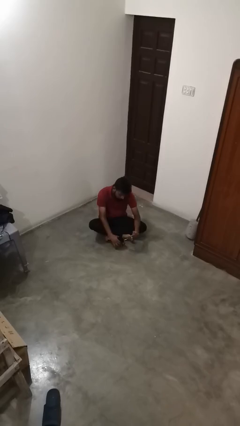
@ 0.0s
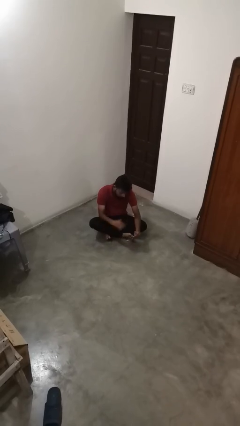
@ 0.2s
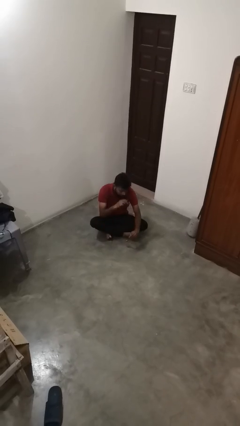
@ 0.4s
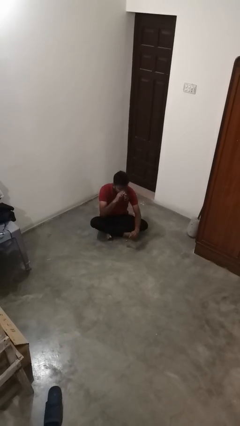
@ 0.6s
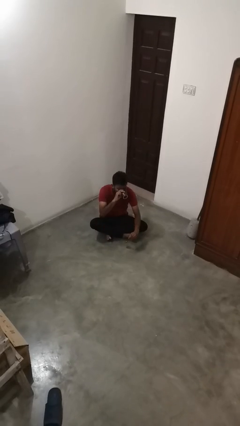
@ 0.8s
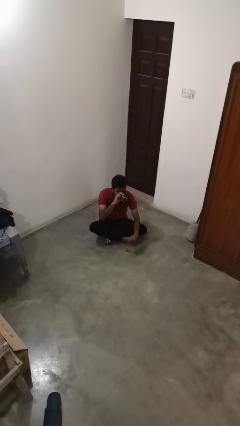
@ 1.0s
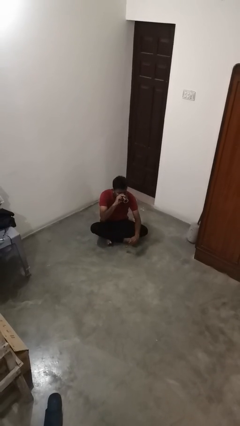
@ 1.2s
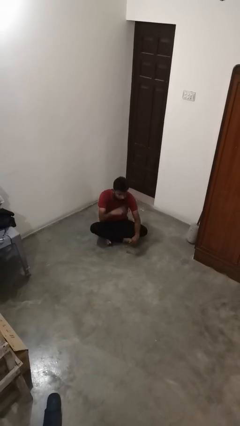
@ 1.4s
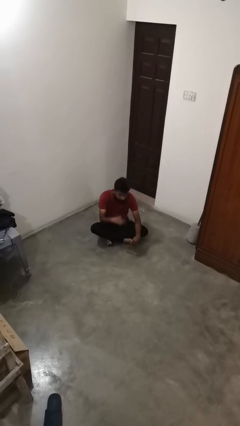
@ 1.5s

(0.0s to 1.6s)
person drinks from mug

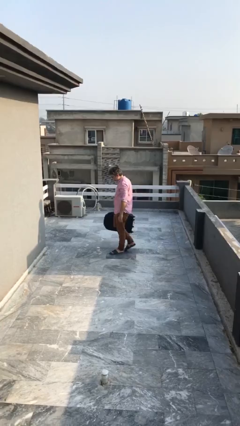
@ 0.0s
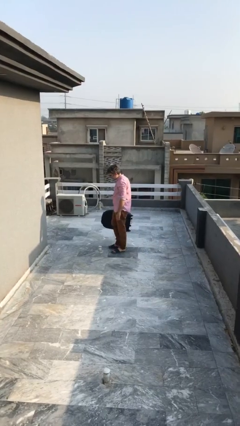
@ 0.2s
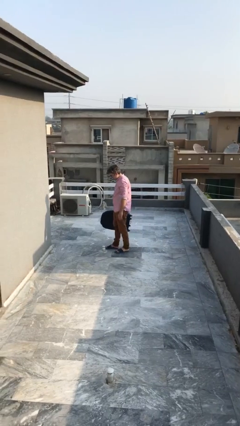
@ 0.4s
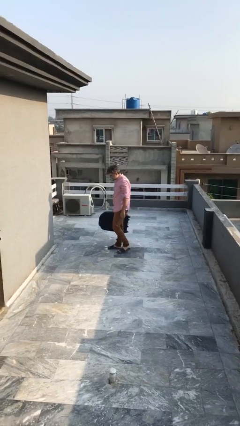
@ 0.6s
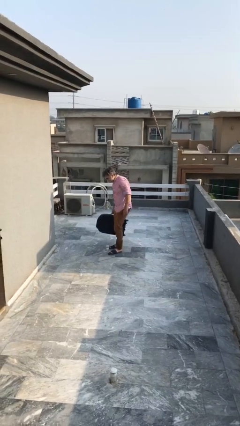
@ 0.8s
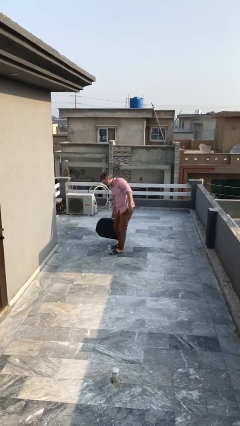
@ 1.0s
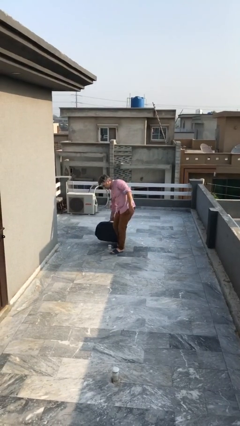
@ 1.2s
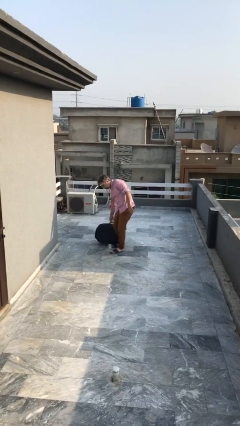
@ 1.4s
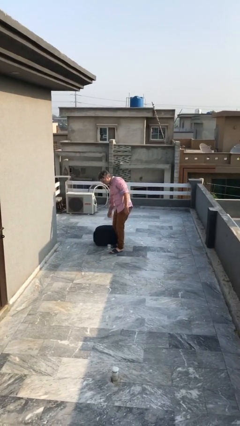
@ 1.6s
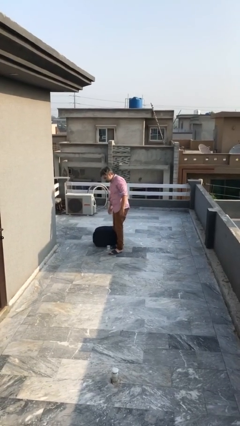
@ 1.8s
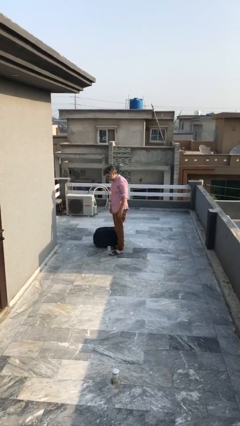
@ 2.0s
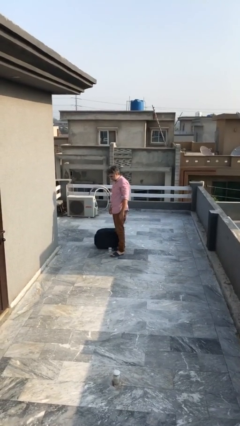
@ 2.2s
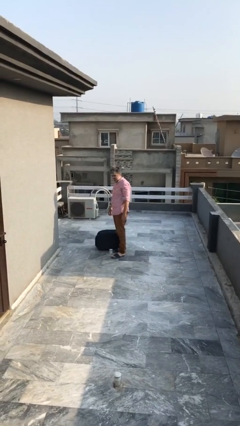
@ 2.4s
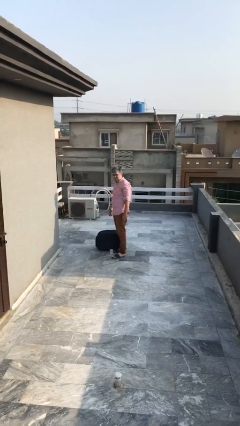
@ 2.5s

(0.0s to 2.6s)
person puts down object on floor

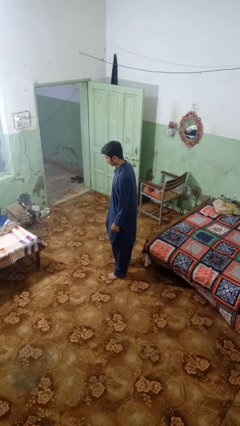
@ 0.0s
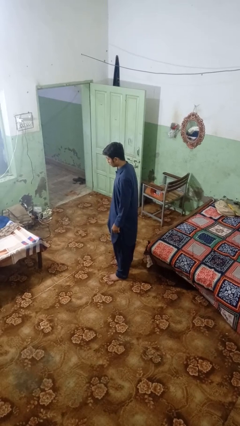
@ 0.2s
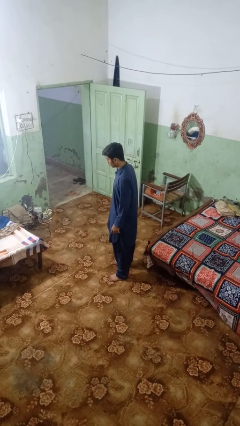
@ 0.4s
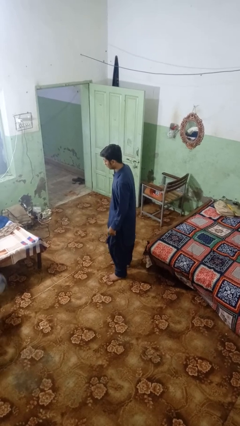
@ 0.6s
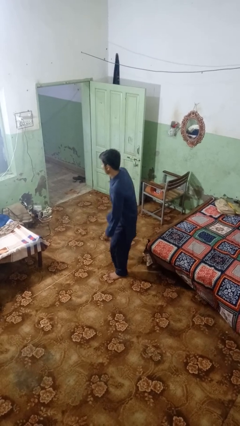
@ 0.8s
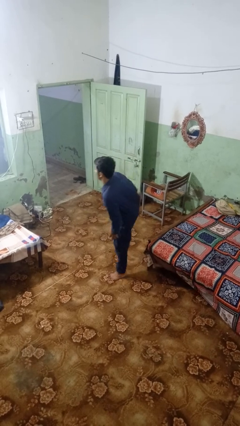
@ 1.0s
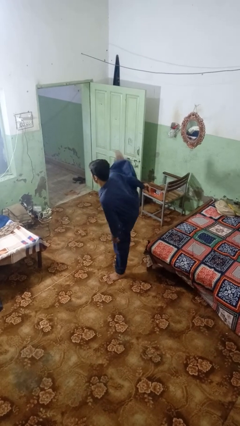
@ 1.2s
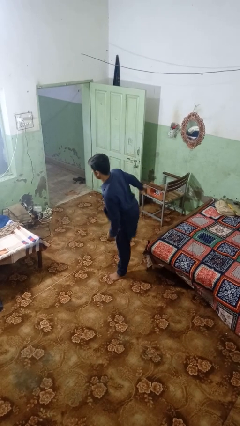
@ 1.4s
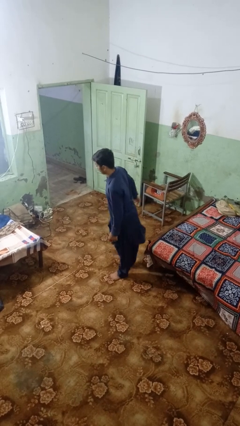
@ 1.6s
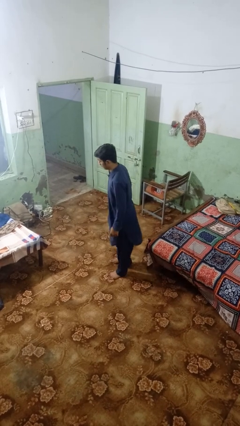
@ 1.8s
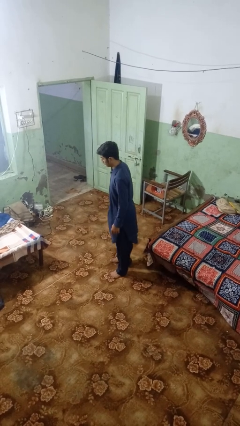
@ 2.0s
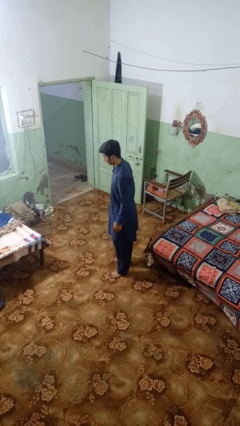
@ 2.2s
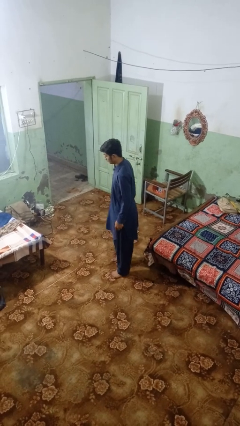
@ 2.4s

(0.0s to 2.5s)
person karate kicks

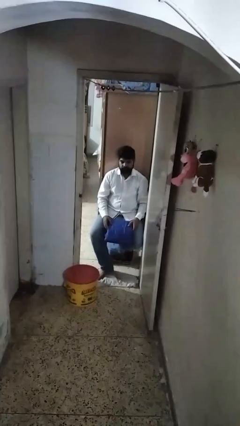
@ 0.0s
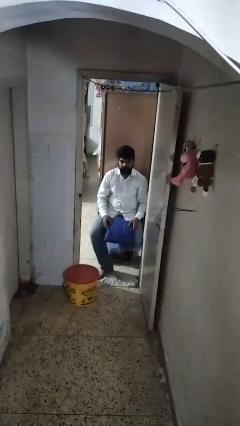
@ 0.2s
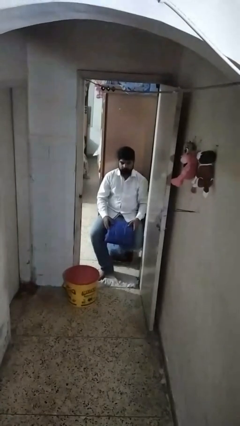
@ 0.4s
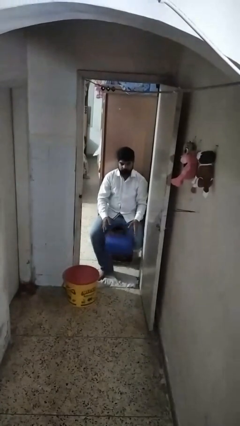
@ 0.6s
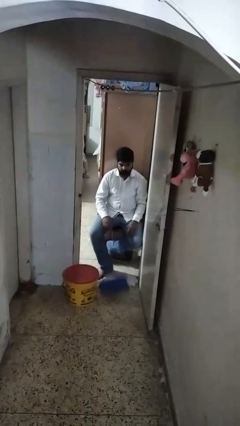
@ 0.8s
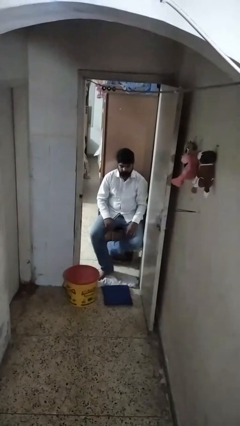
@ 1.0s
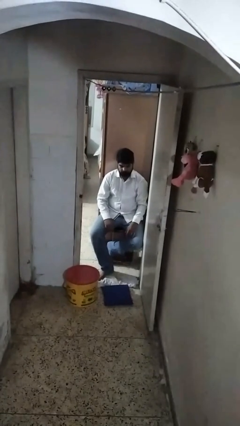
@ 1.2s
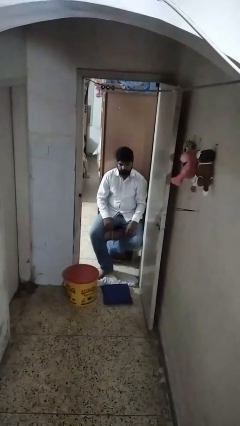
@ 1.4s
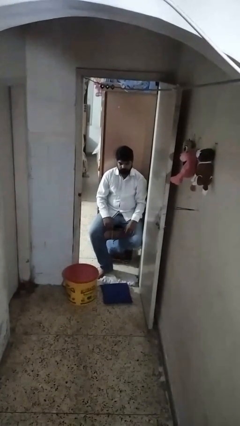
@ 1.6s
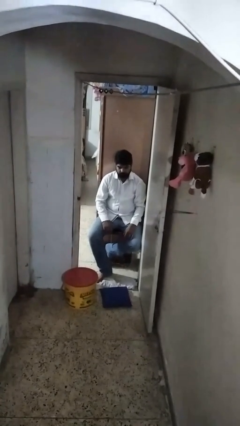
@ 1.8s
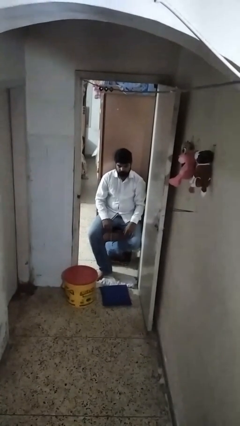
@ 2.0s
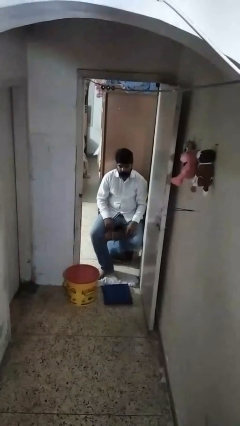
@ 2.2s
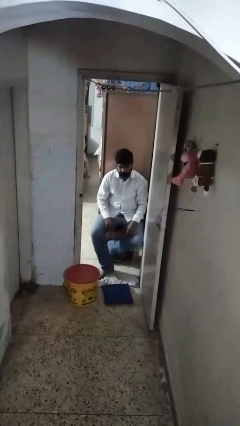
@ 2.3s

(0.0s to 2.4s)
person drops object

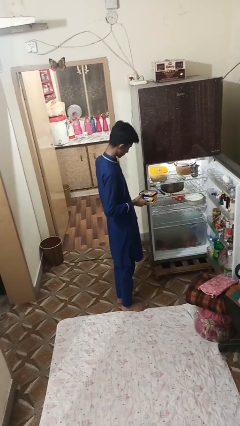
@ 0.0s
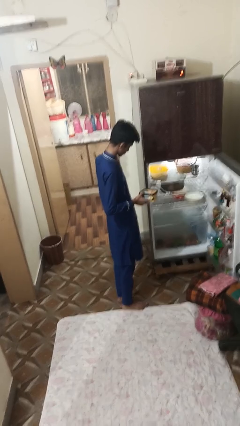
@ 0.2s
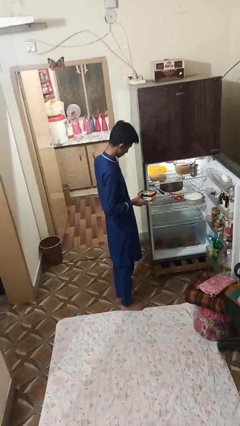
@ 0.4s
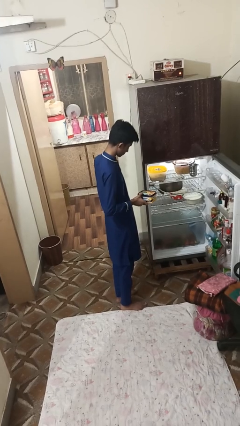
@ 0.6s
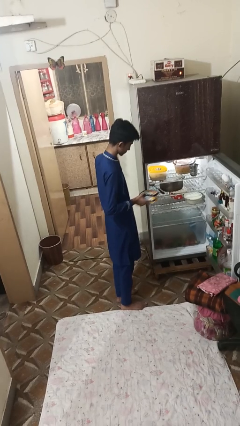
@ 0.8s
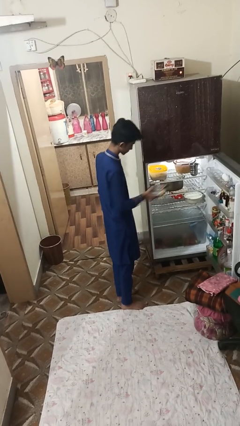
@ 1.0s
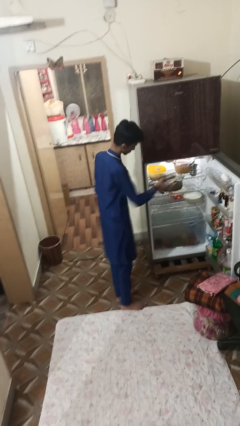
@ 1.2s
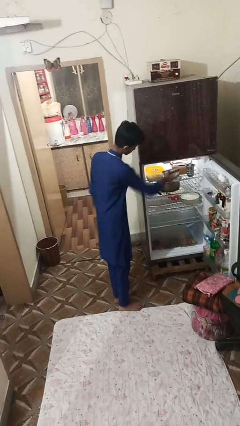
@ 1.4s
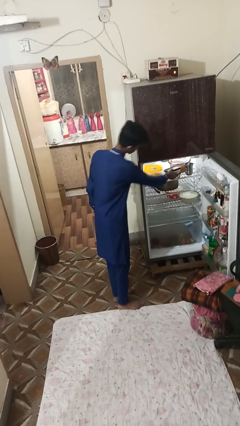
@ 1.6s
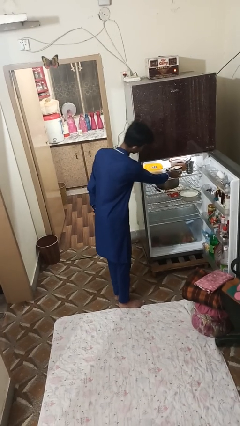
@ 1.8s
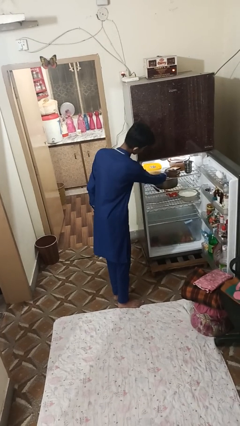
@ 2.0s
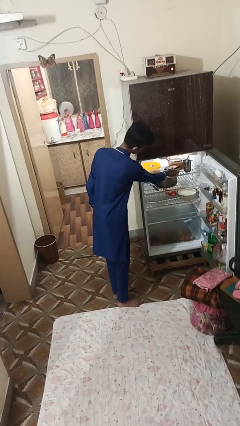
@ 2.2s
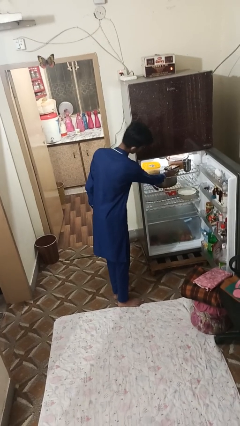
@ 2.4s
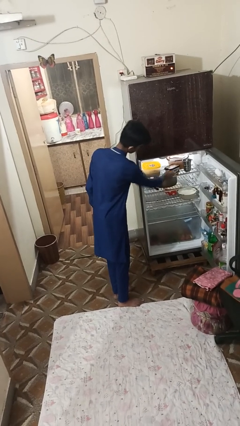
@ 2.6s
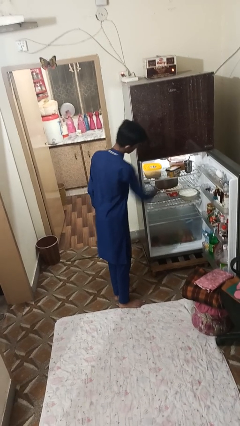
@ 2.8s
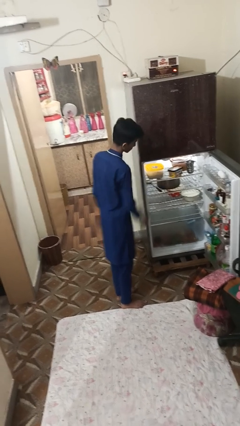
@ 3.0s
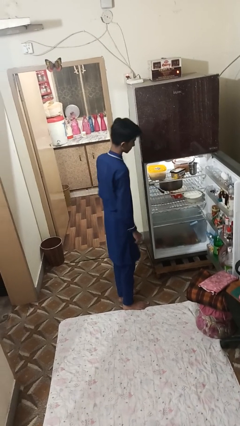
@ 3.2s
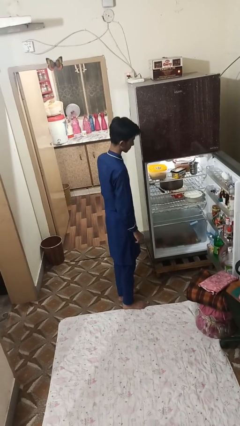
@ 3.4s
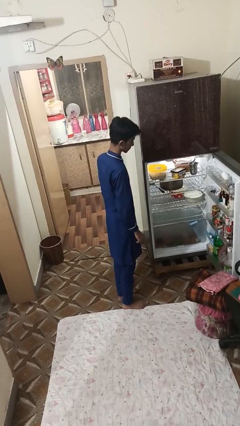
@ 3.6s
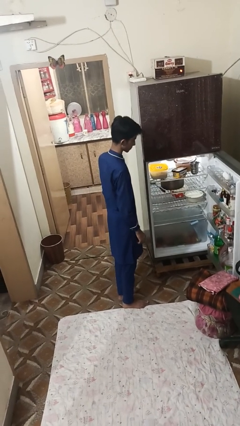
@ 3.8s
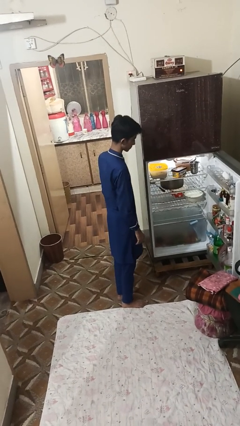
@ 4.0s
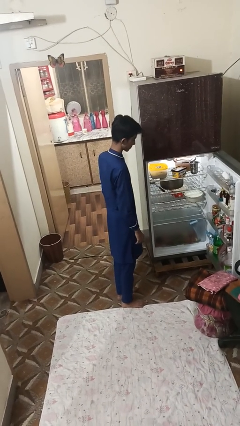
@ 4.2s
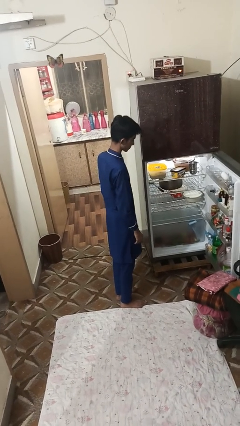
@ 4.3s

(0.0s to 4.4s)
person puts object into refrigerator

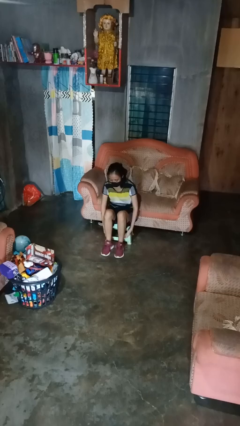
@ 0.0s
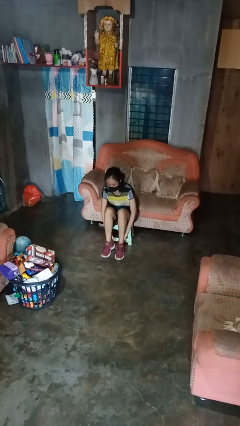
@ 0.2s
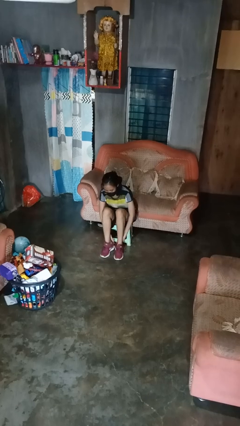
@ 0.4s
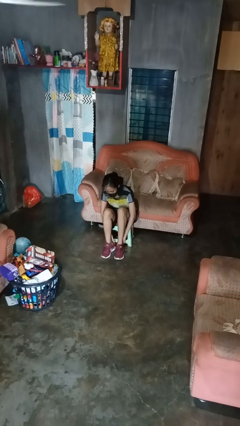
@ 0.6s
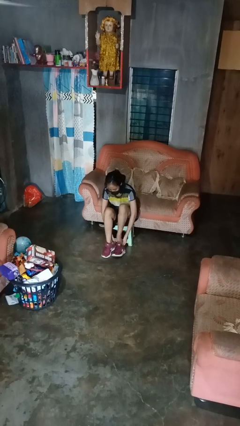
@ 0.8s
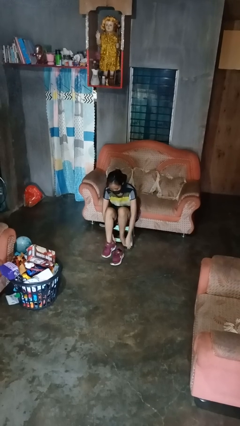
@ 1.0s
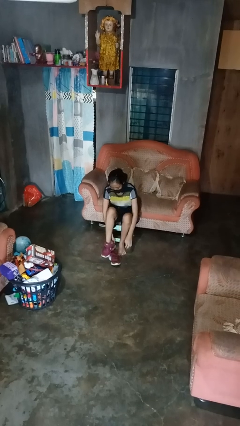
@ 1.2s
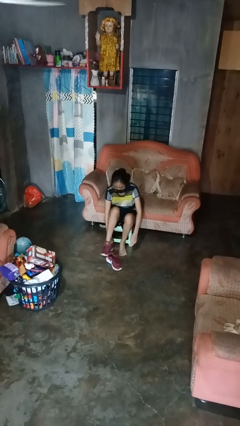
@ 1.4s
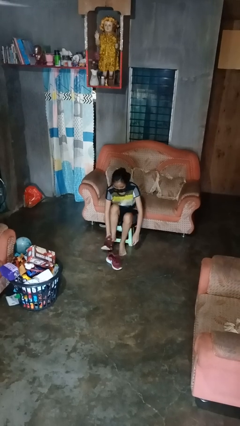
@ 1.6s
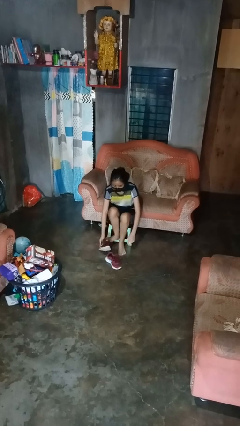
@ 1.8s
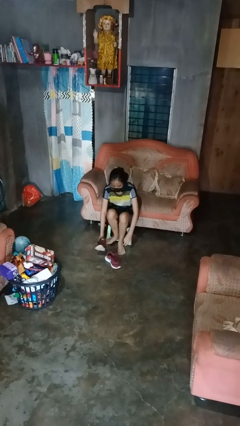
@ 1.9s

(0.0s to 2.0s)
person takes off shoes

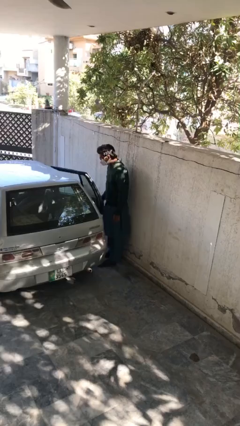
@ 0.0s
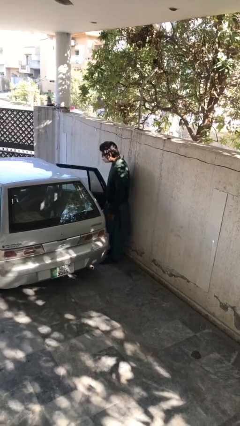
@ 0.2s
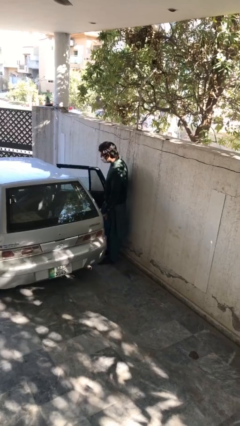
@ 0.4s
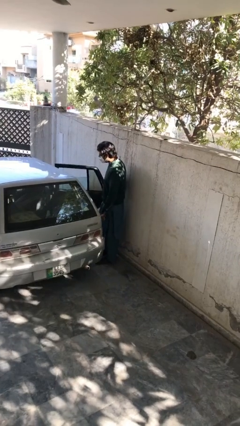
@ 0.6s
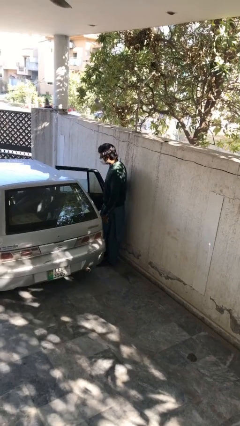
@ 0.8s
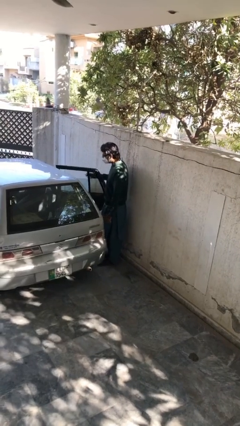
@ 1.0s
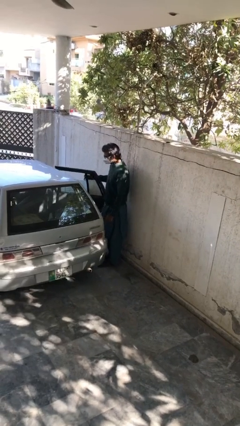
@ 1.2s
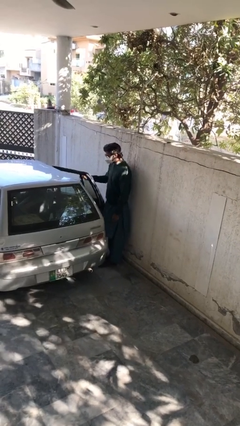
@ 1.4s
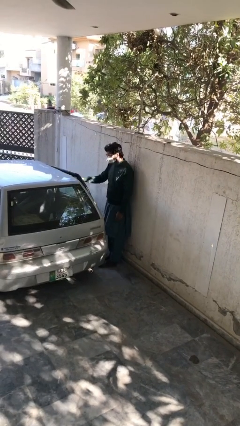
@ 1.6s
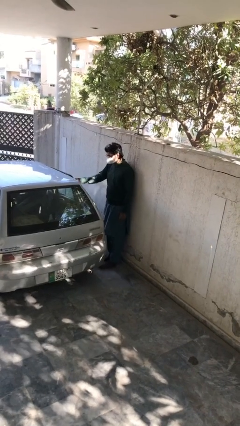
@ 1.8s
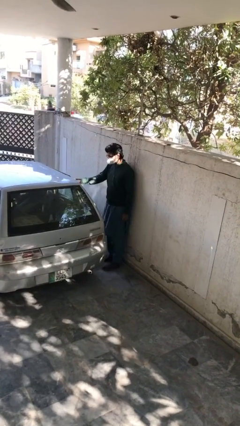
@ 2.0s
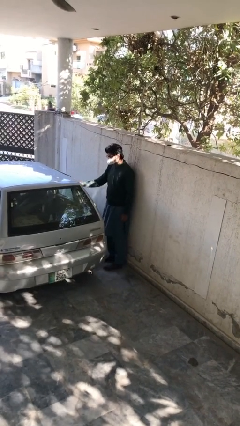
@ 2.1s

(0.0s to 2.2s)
person closes car door
